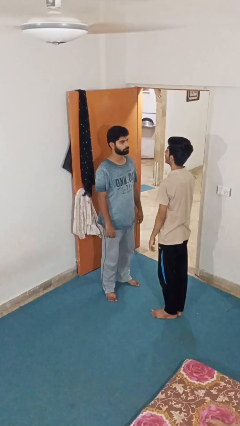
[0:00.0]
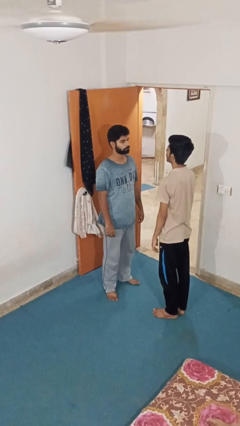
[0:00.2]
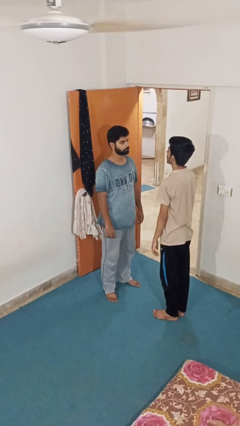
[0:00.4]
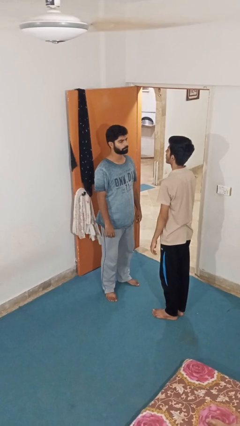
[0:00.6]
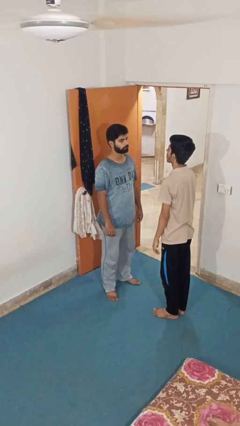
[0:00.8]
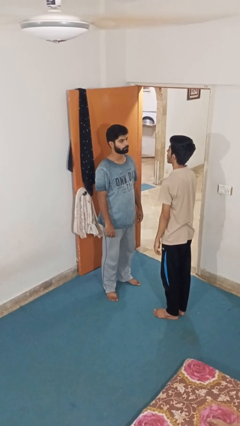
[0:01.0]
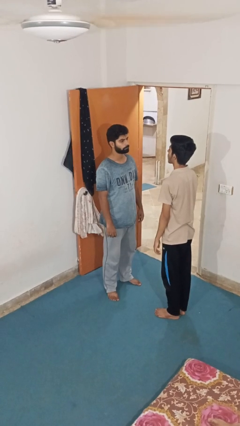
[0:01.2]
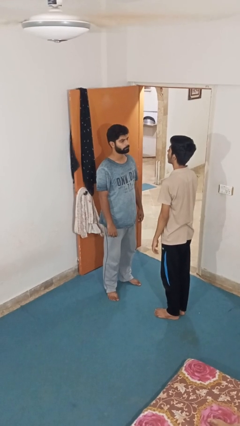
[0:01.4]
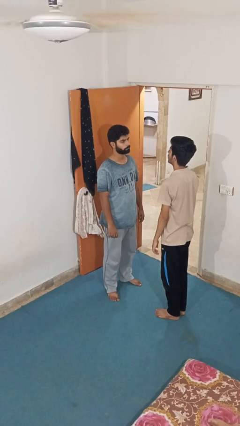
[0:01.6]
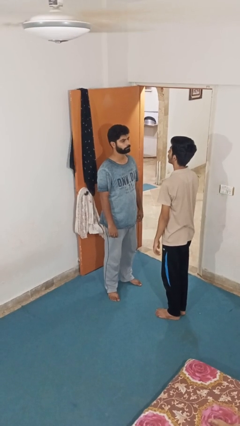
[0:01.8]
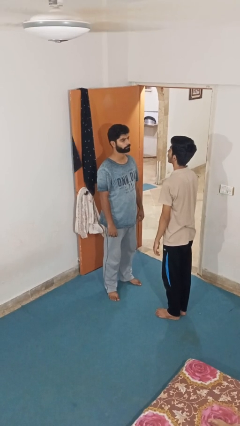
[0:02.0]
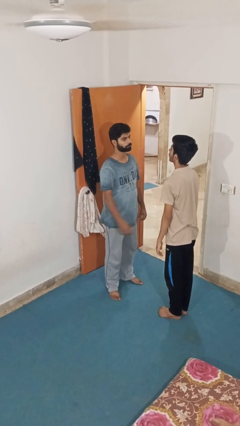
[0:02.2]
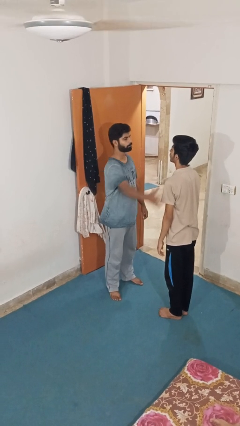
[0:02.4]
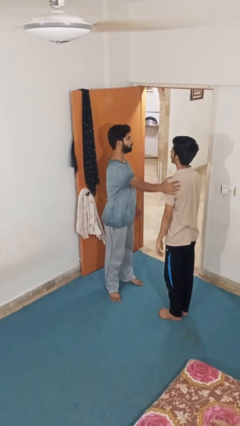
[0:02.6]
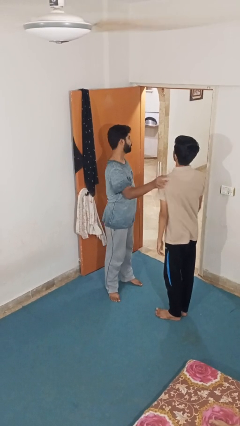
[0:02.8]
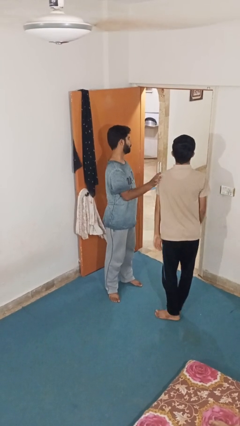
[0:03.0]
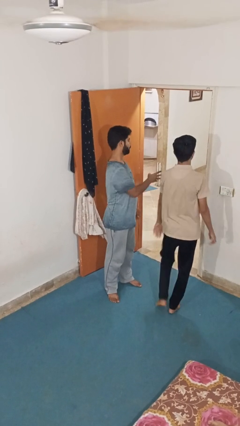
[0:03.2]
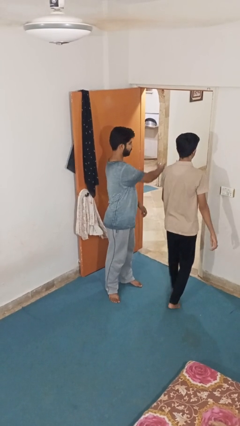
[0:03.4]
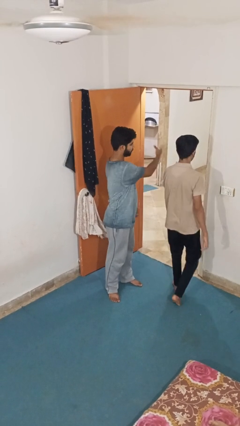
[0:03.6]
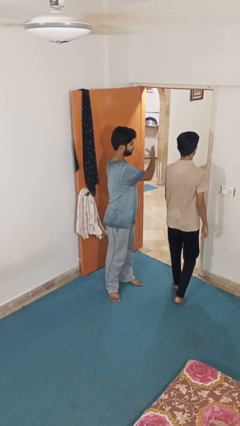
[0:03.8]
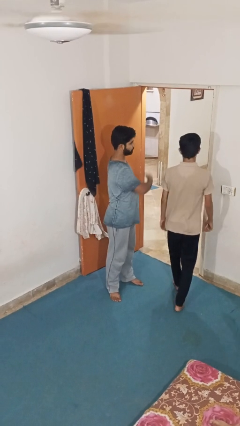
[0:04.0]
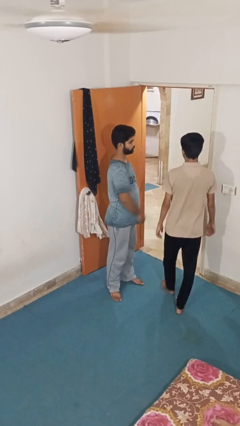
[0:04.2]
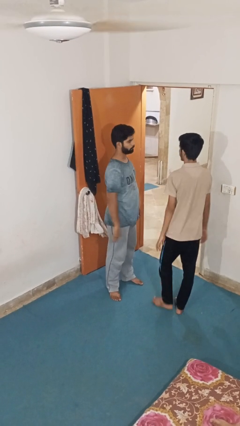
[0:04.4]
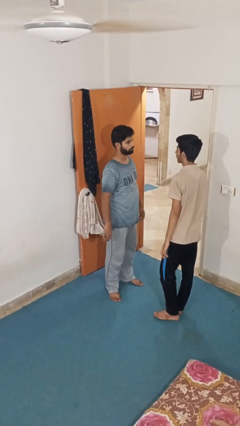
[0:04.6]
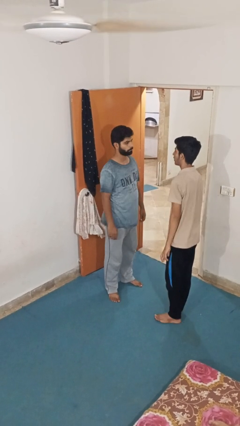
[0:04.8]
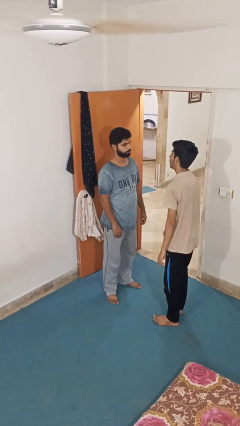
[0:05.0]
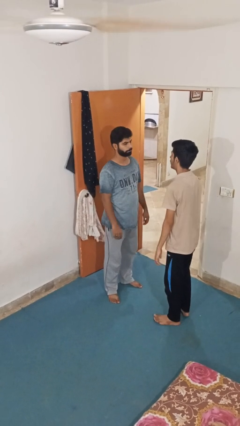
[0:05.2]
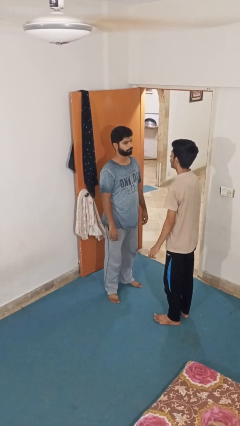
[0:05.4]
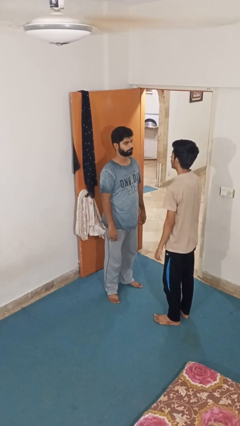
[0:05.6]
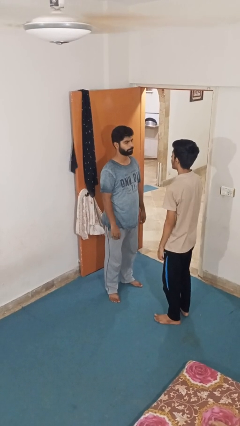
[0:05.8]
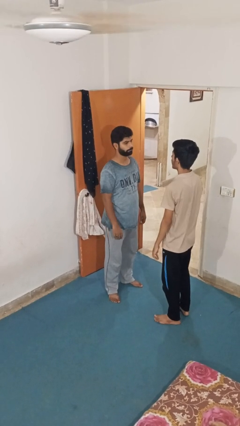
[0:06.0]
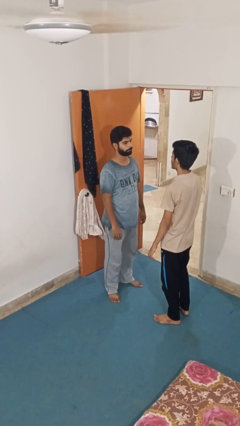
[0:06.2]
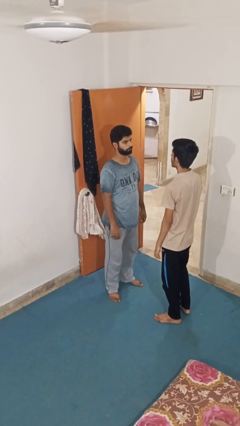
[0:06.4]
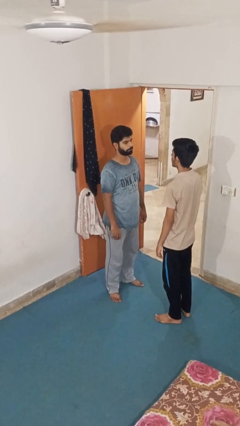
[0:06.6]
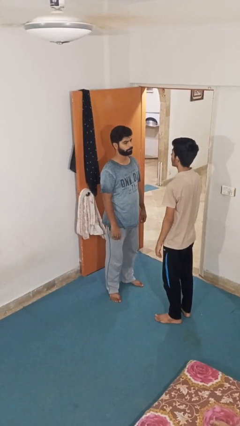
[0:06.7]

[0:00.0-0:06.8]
person shoves person

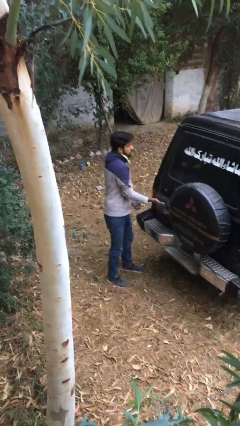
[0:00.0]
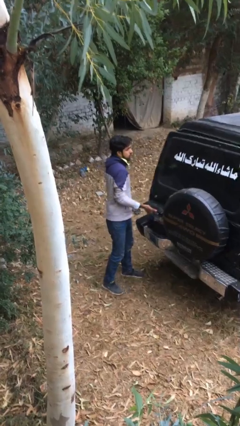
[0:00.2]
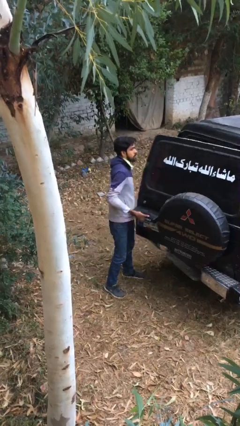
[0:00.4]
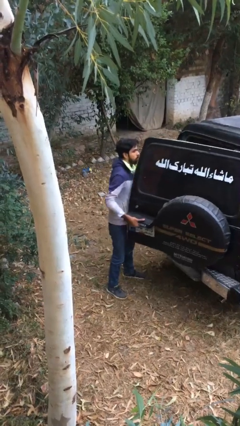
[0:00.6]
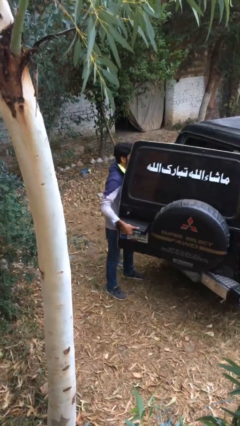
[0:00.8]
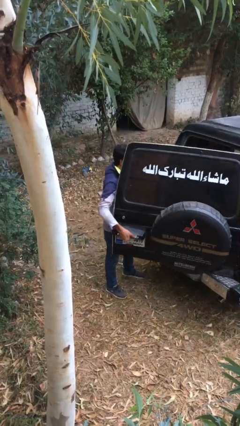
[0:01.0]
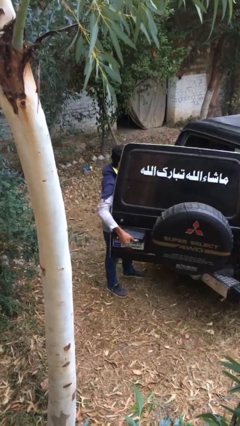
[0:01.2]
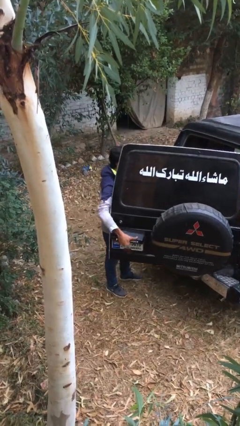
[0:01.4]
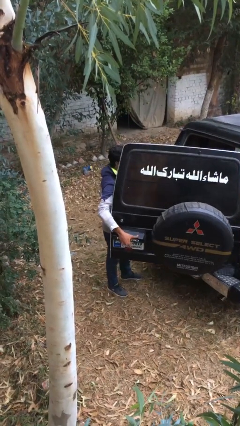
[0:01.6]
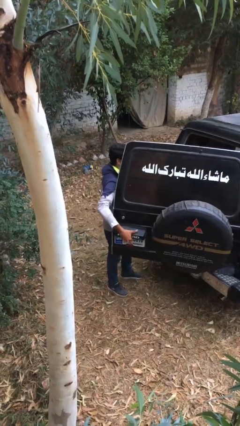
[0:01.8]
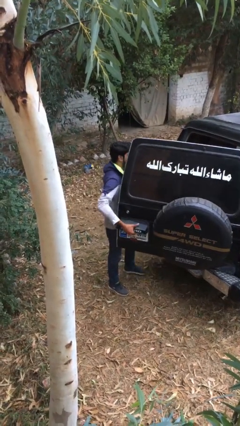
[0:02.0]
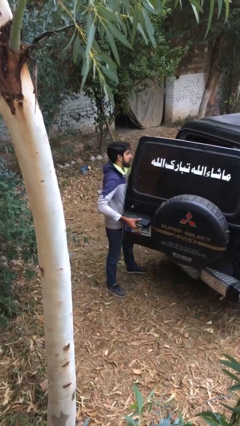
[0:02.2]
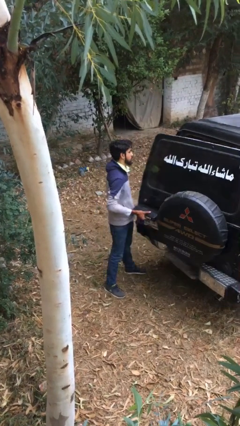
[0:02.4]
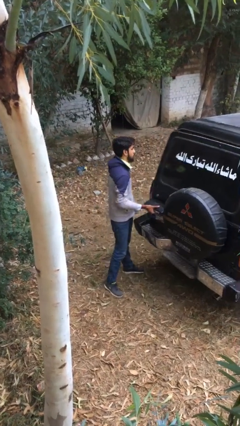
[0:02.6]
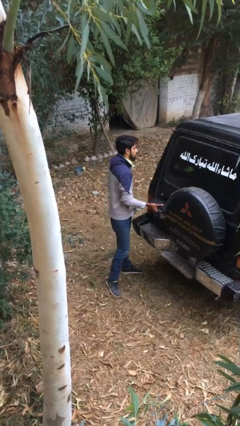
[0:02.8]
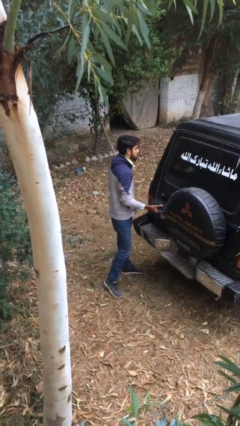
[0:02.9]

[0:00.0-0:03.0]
person opens car trunk

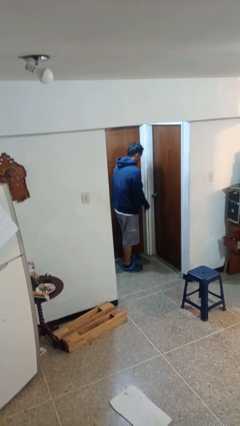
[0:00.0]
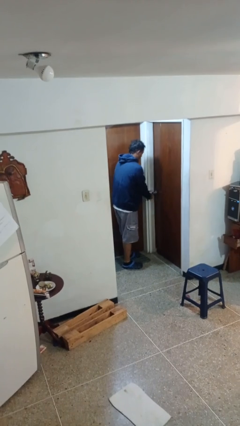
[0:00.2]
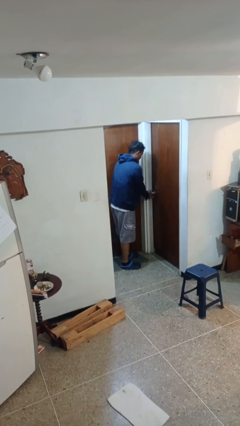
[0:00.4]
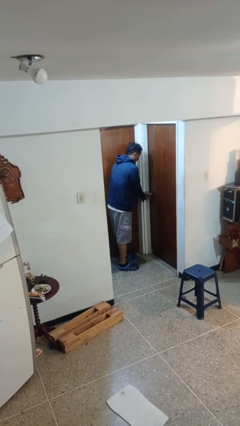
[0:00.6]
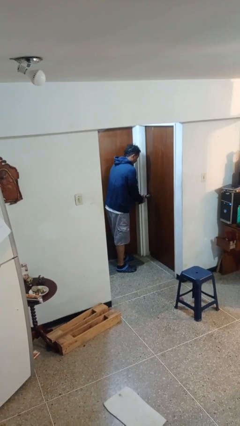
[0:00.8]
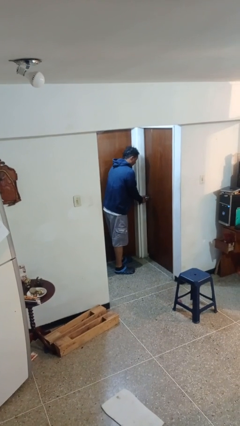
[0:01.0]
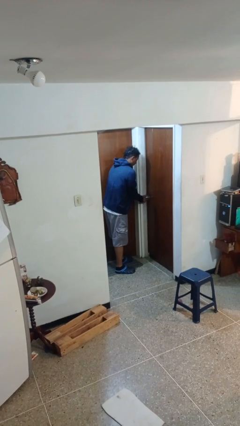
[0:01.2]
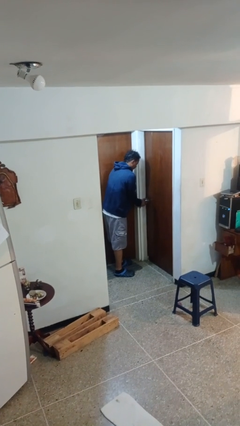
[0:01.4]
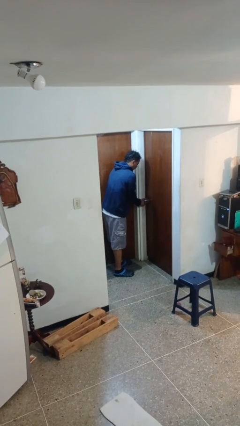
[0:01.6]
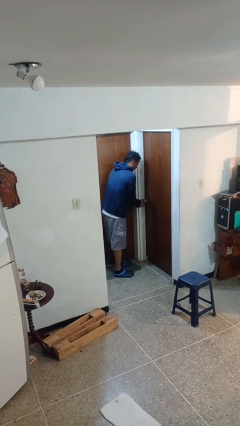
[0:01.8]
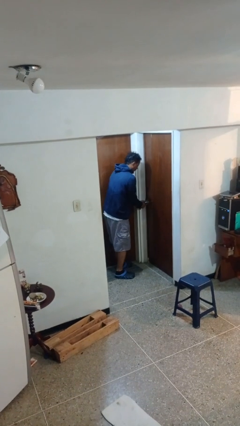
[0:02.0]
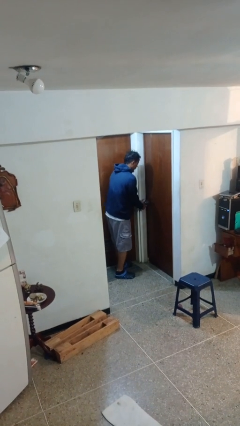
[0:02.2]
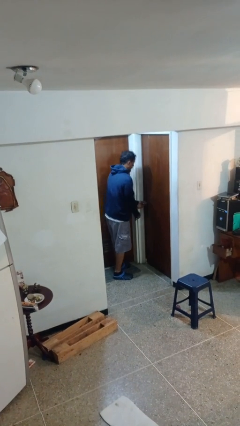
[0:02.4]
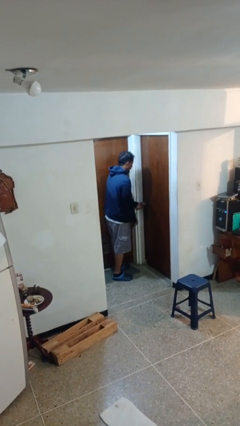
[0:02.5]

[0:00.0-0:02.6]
person unlocks door with keys

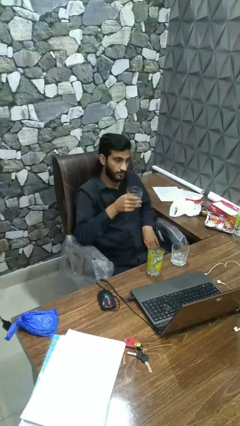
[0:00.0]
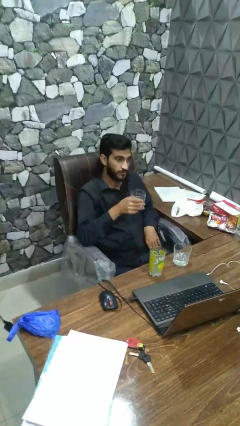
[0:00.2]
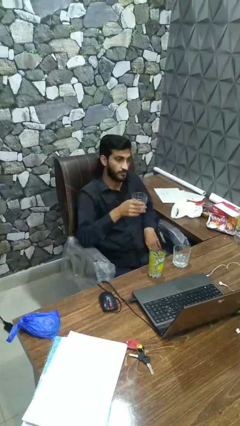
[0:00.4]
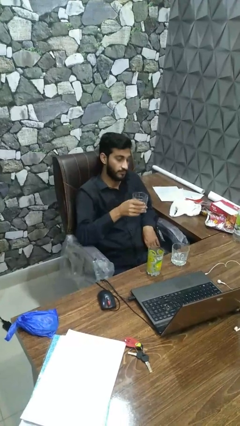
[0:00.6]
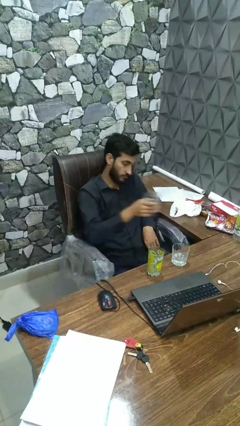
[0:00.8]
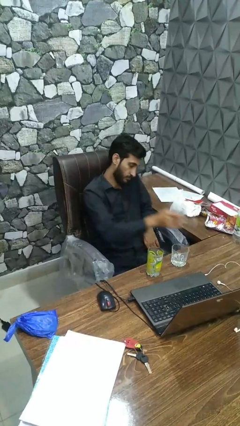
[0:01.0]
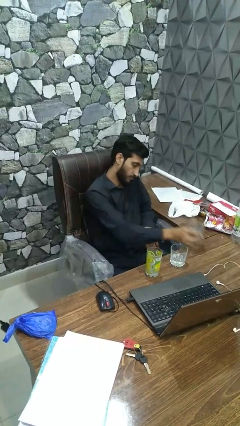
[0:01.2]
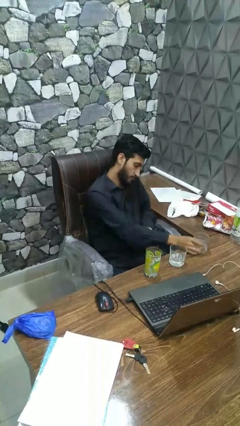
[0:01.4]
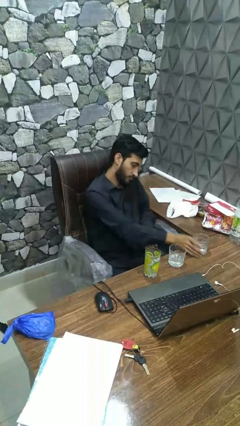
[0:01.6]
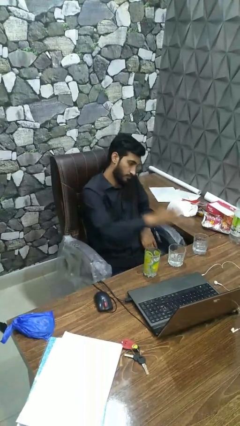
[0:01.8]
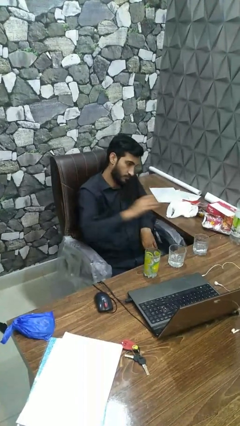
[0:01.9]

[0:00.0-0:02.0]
person puts down object on table

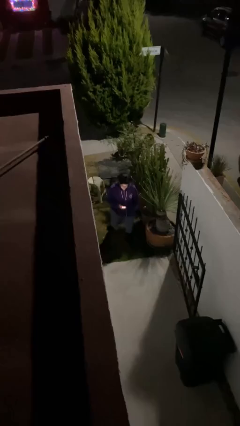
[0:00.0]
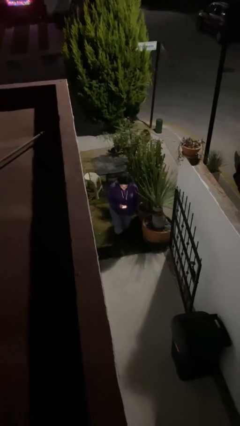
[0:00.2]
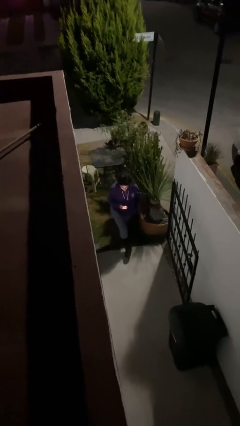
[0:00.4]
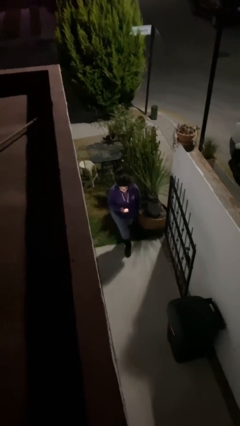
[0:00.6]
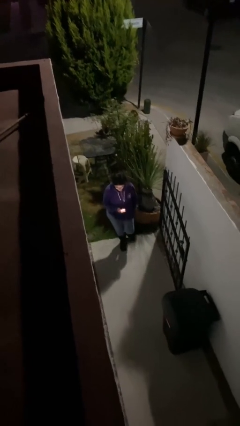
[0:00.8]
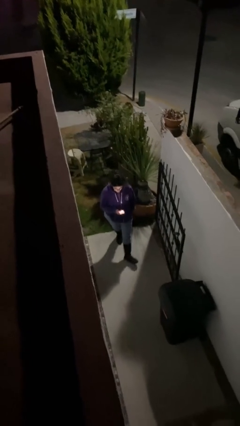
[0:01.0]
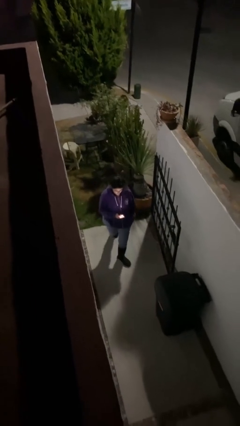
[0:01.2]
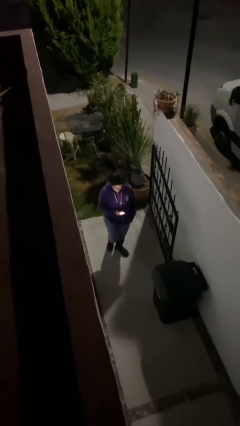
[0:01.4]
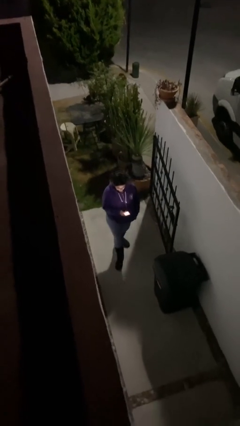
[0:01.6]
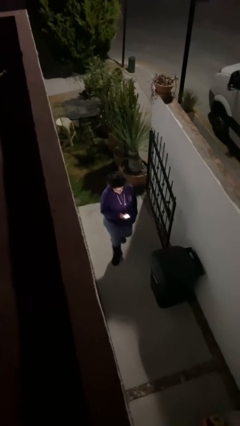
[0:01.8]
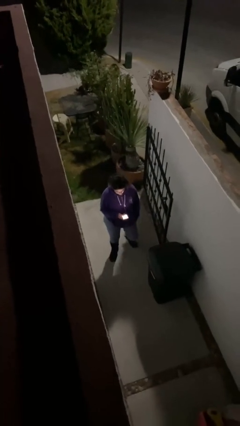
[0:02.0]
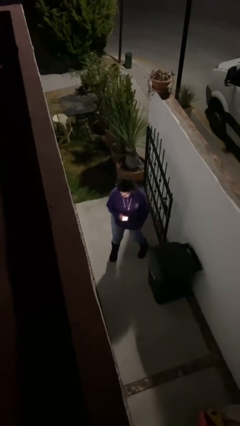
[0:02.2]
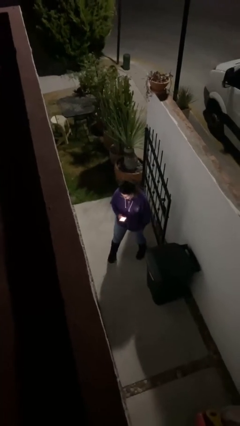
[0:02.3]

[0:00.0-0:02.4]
person enters scene through structure

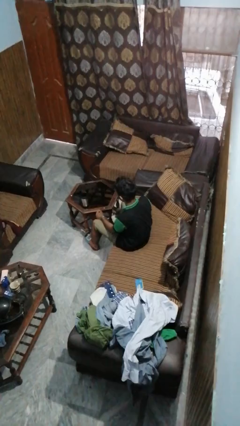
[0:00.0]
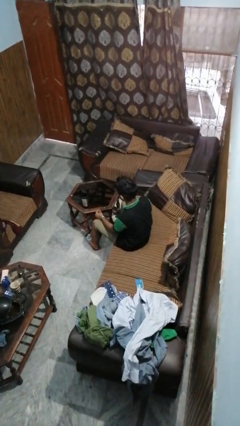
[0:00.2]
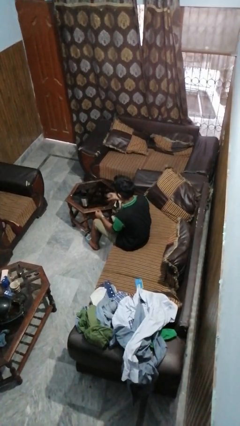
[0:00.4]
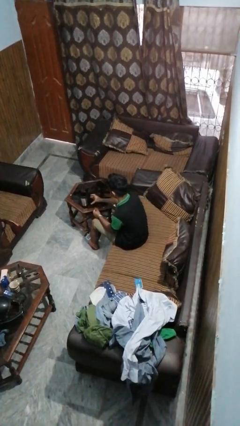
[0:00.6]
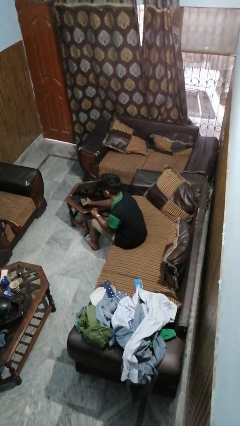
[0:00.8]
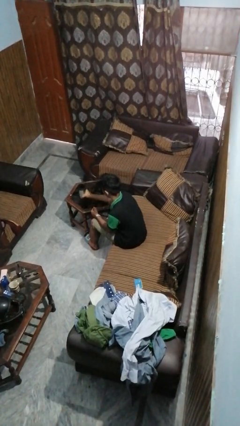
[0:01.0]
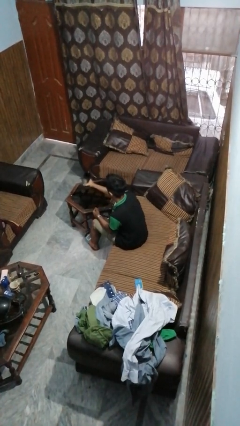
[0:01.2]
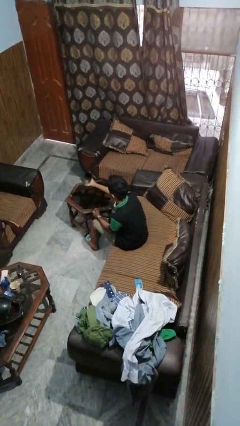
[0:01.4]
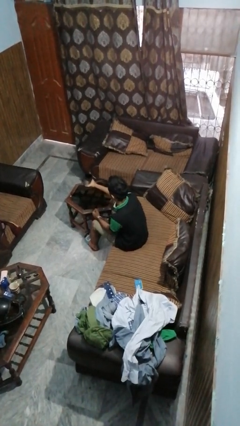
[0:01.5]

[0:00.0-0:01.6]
person picks up object from table
